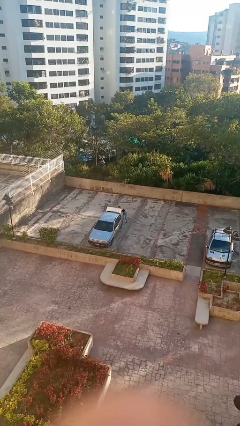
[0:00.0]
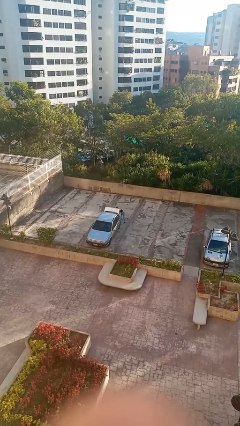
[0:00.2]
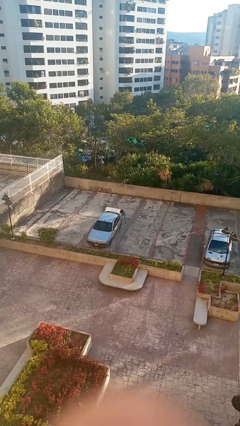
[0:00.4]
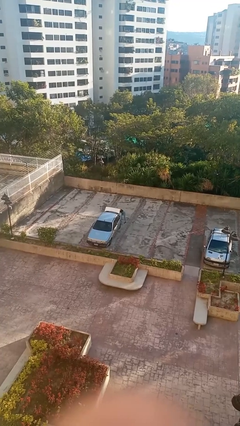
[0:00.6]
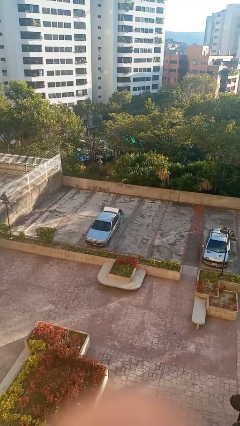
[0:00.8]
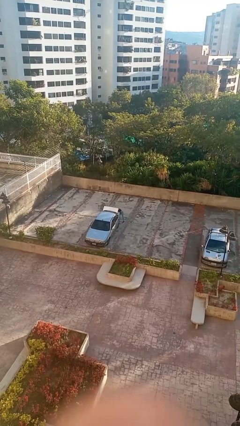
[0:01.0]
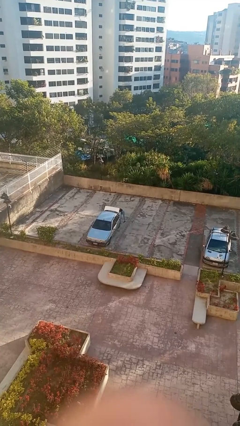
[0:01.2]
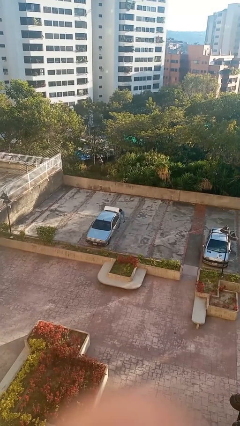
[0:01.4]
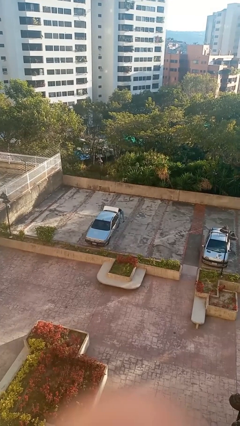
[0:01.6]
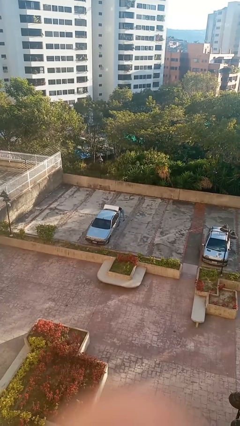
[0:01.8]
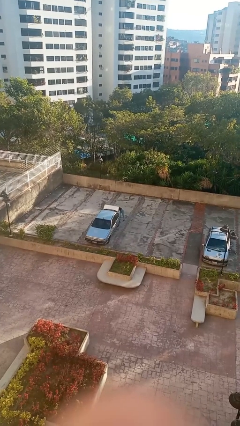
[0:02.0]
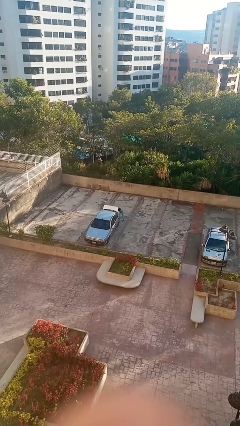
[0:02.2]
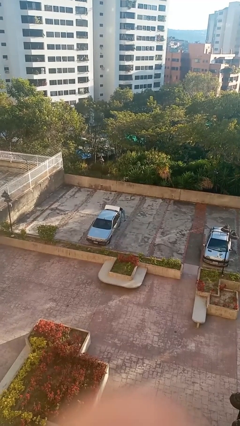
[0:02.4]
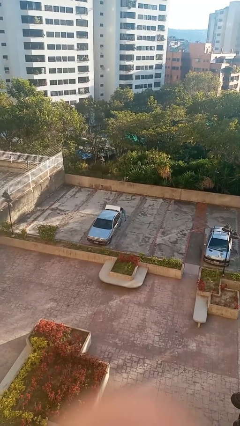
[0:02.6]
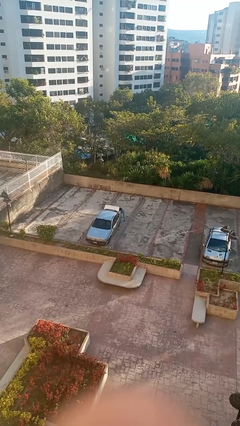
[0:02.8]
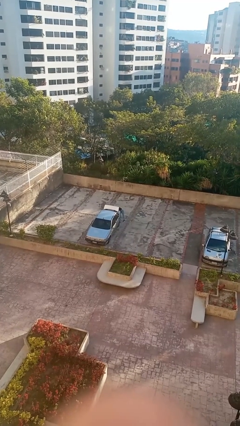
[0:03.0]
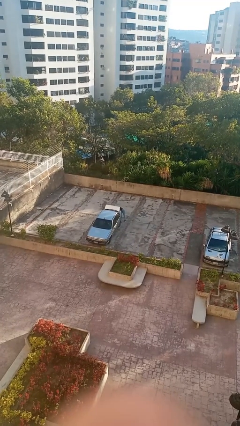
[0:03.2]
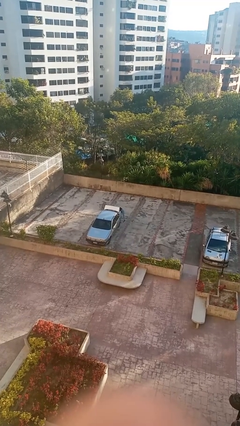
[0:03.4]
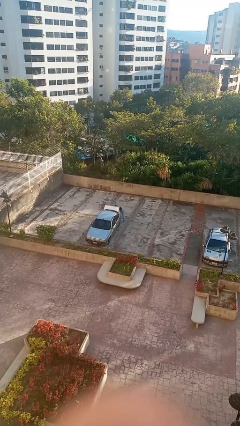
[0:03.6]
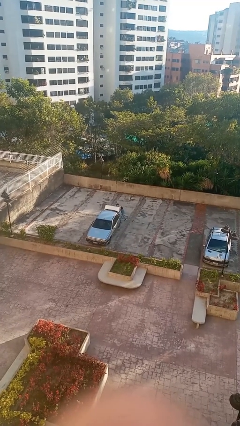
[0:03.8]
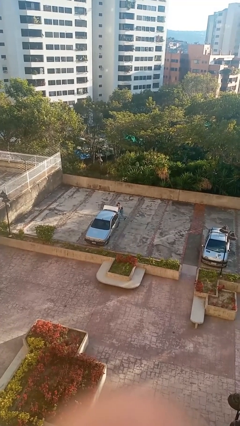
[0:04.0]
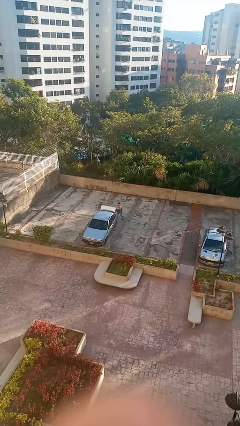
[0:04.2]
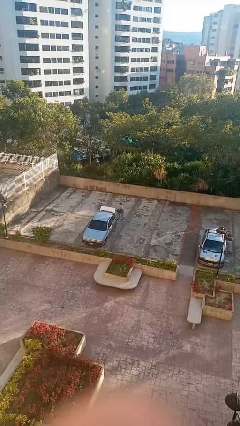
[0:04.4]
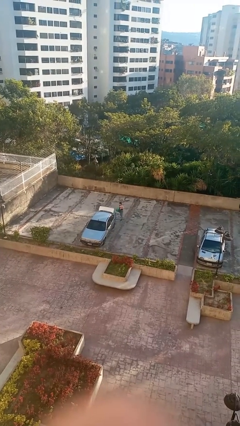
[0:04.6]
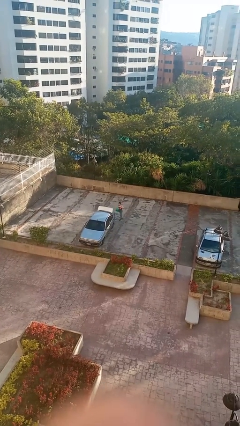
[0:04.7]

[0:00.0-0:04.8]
person unloads car

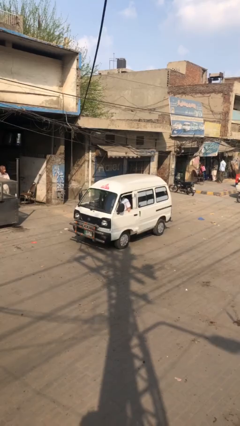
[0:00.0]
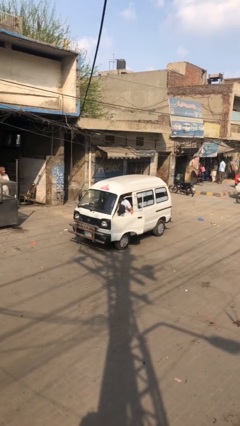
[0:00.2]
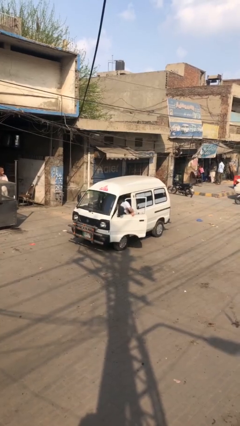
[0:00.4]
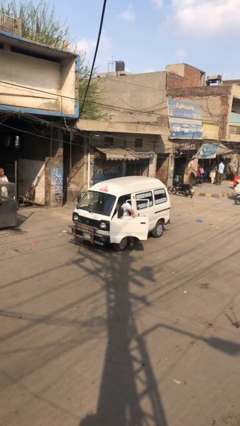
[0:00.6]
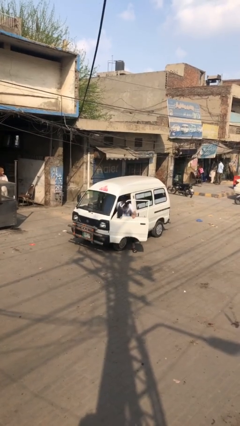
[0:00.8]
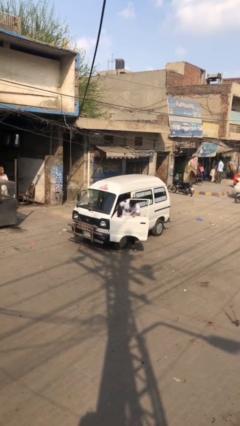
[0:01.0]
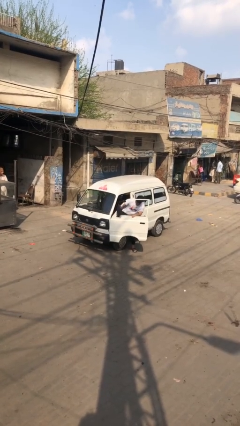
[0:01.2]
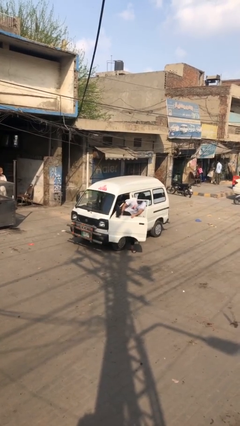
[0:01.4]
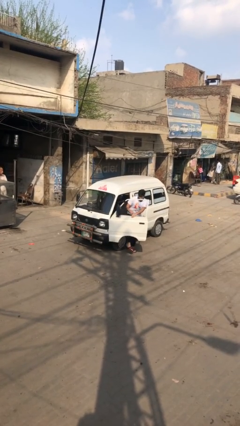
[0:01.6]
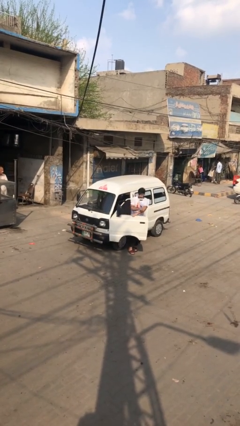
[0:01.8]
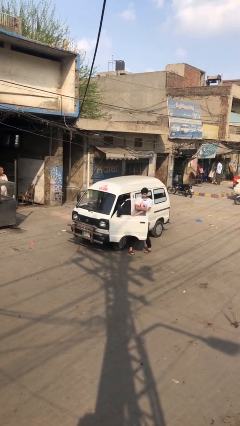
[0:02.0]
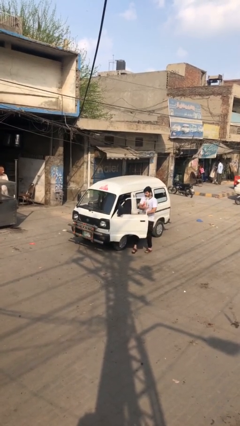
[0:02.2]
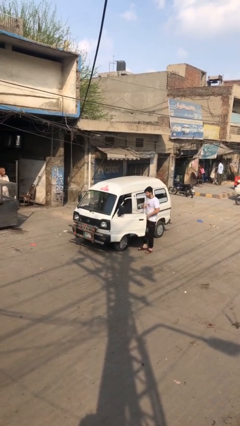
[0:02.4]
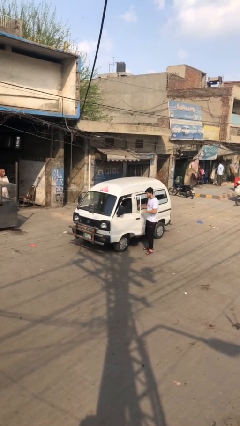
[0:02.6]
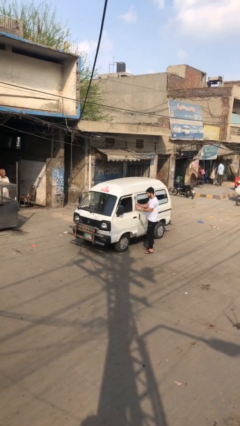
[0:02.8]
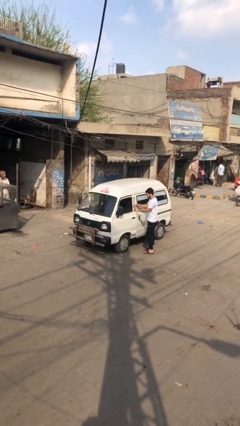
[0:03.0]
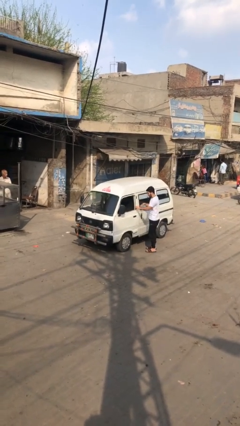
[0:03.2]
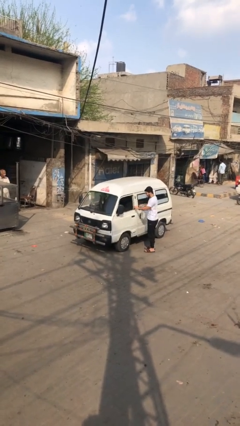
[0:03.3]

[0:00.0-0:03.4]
car drops off person

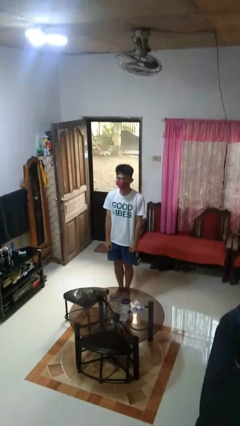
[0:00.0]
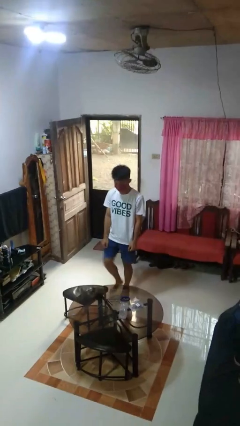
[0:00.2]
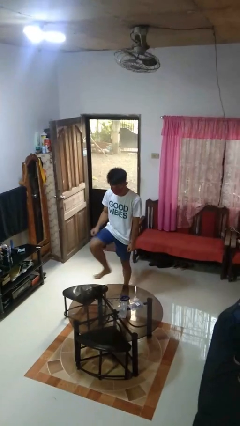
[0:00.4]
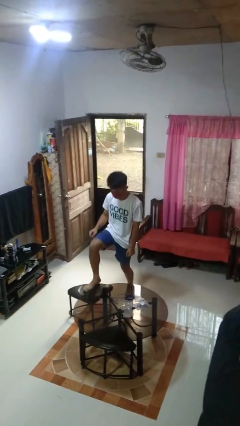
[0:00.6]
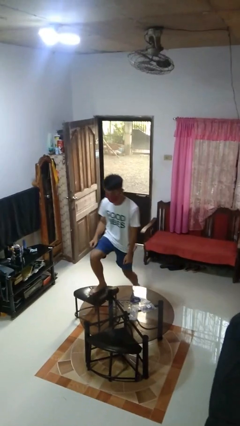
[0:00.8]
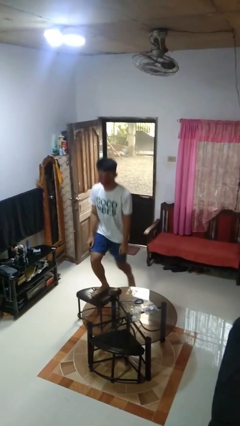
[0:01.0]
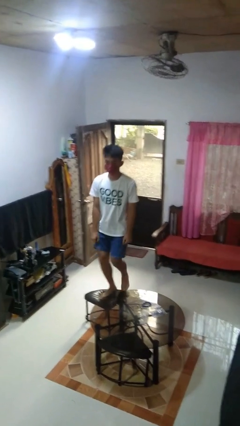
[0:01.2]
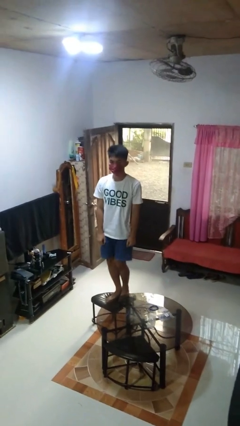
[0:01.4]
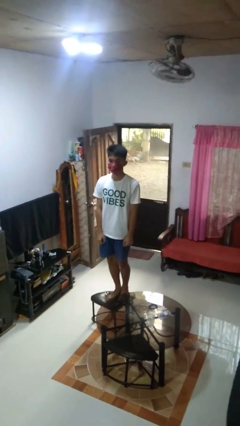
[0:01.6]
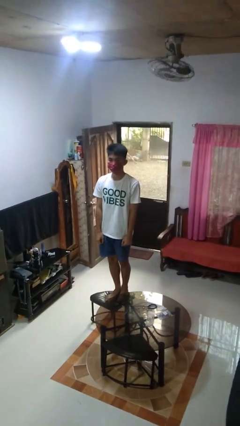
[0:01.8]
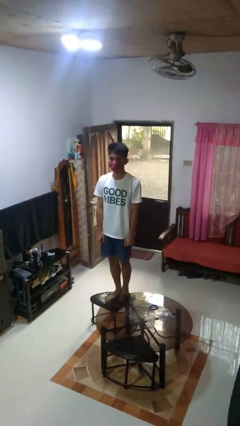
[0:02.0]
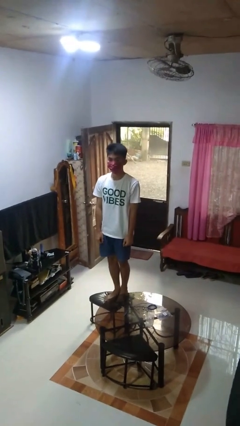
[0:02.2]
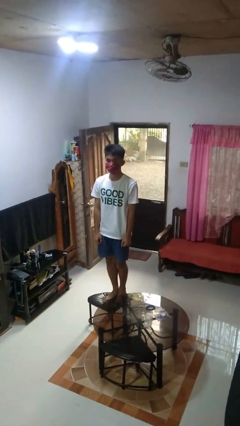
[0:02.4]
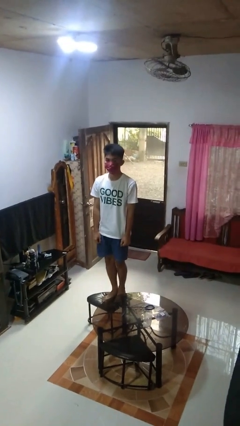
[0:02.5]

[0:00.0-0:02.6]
person climbs on chair

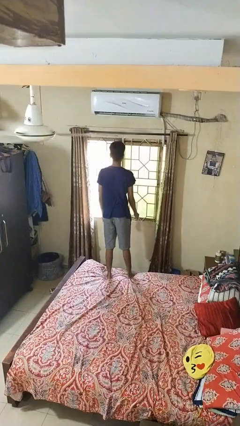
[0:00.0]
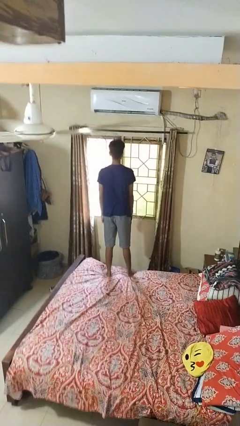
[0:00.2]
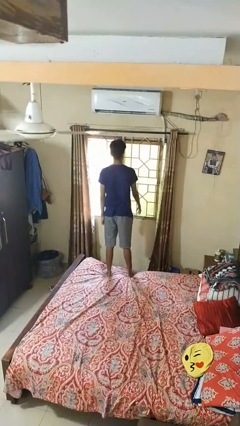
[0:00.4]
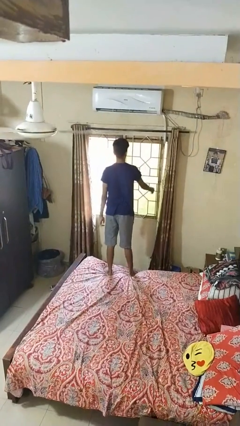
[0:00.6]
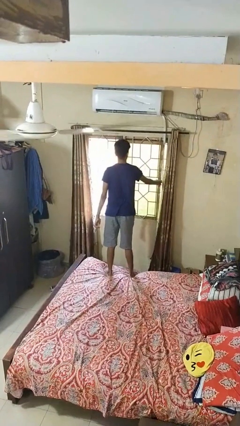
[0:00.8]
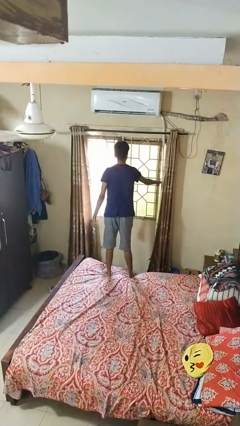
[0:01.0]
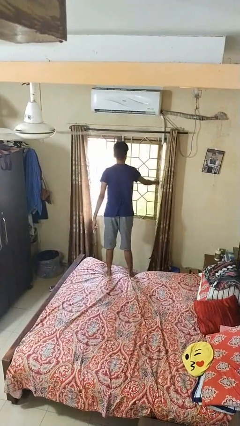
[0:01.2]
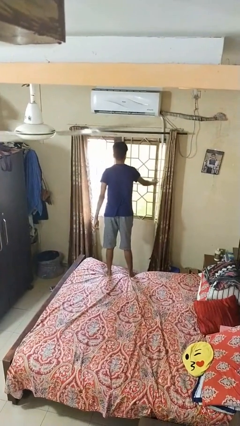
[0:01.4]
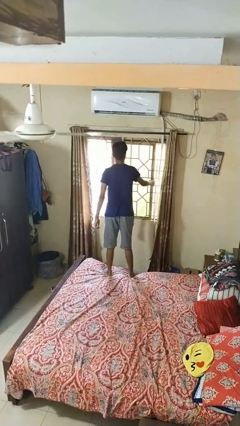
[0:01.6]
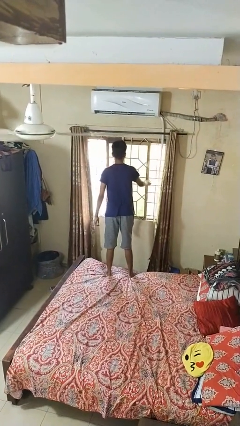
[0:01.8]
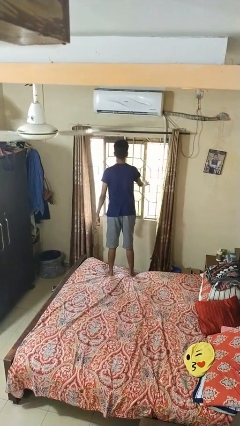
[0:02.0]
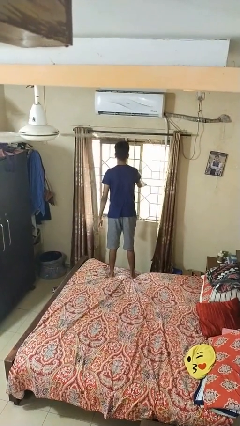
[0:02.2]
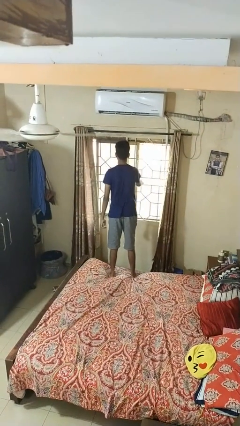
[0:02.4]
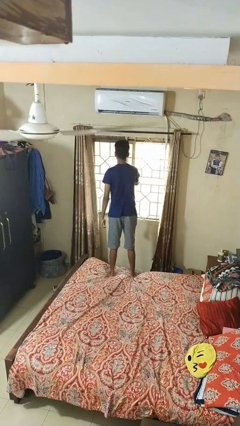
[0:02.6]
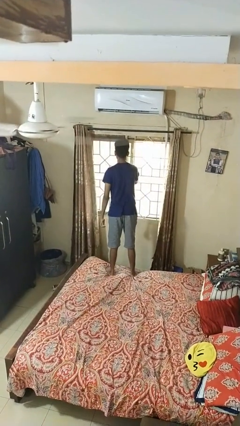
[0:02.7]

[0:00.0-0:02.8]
person closes home window

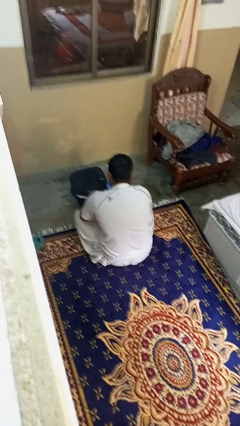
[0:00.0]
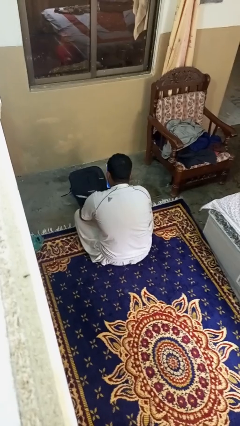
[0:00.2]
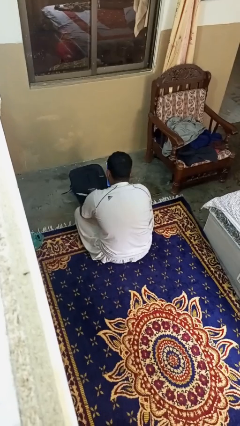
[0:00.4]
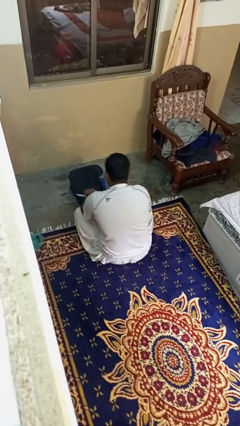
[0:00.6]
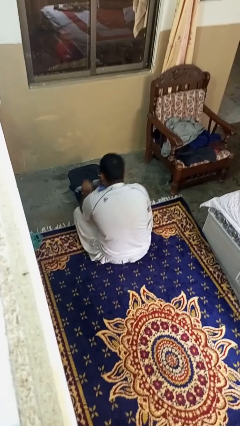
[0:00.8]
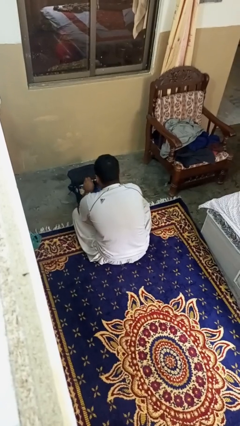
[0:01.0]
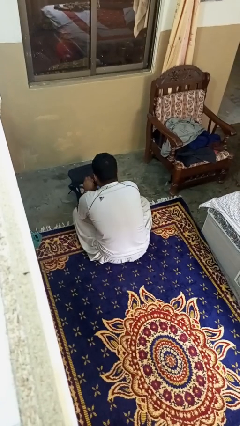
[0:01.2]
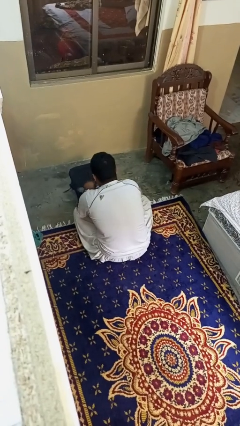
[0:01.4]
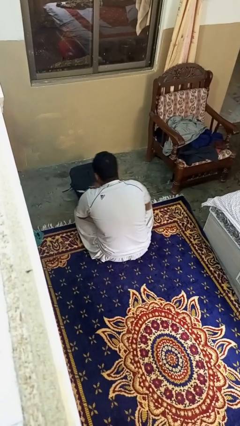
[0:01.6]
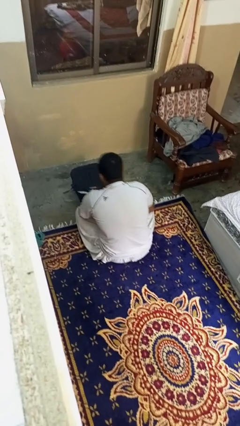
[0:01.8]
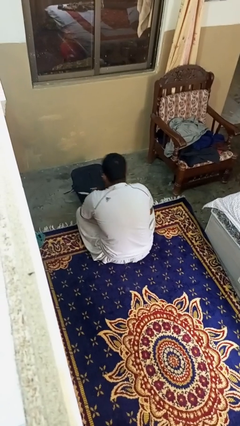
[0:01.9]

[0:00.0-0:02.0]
person puts object into bag

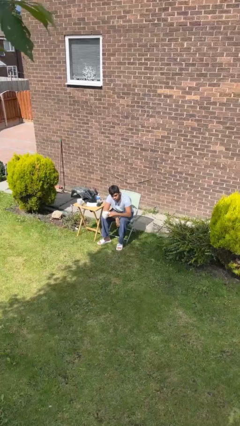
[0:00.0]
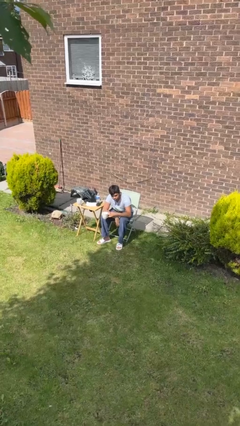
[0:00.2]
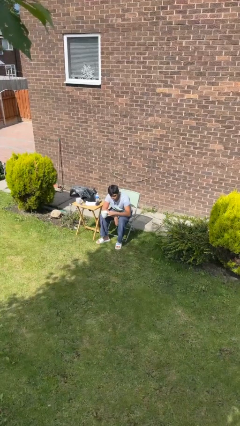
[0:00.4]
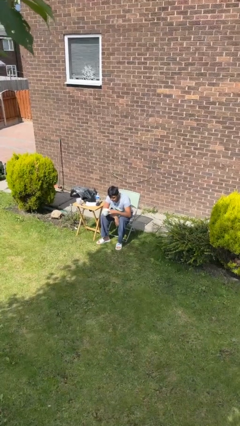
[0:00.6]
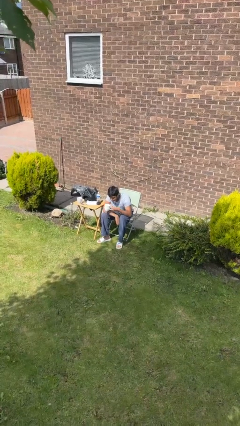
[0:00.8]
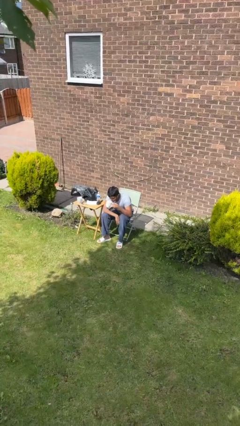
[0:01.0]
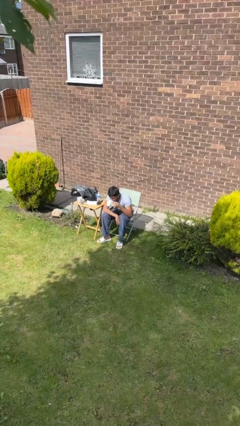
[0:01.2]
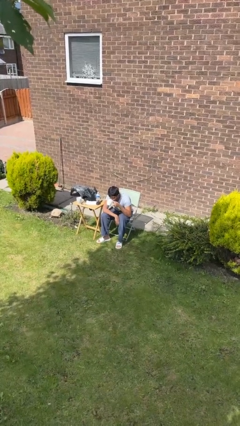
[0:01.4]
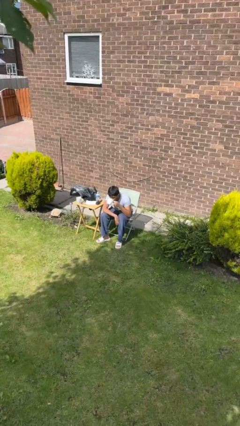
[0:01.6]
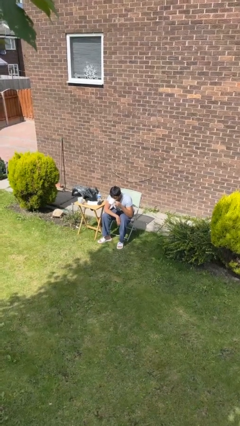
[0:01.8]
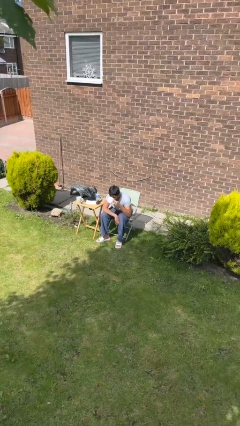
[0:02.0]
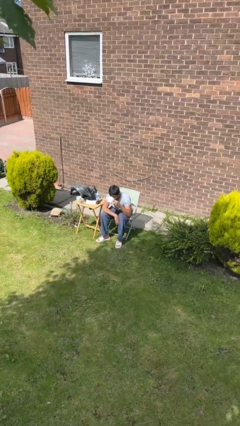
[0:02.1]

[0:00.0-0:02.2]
person drinks from mug
